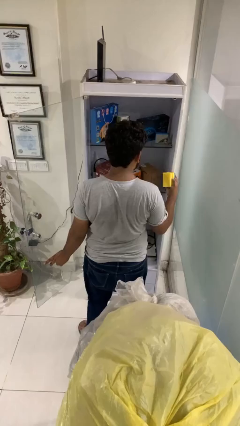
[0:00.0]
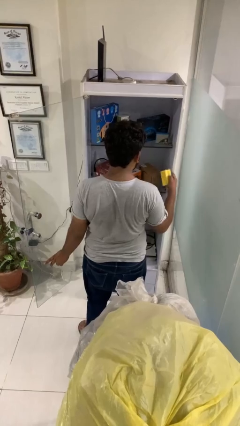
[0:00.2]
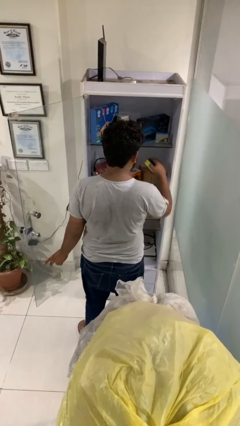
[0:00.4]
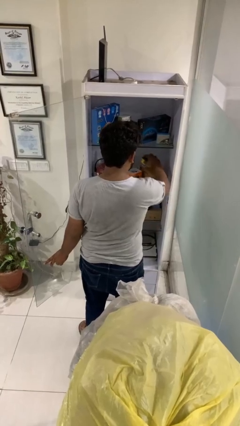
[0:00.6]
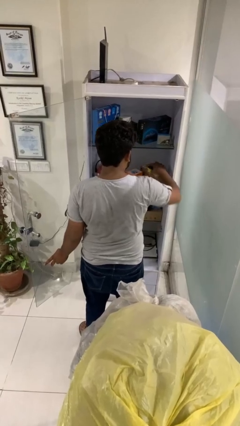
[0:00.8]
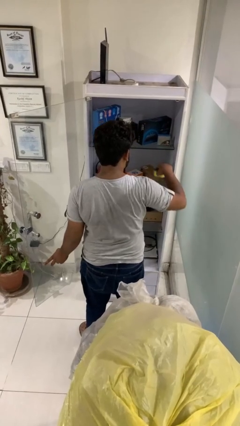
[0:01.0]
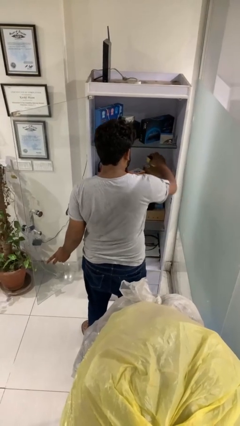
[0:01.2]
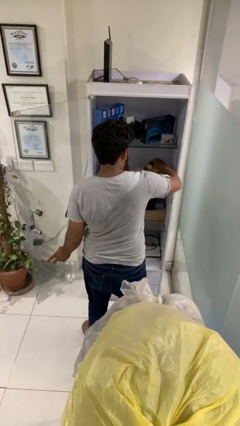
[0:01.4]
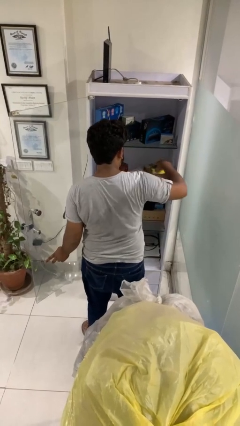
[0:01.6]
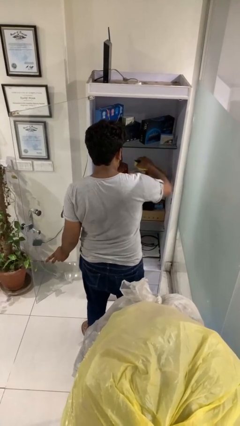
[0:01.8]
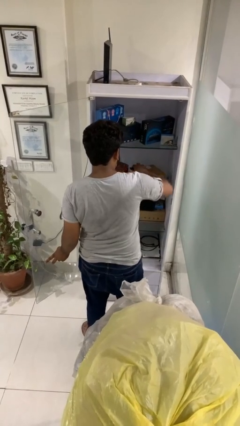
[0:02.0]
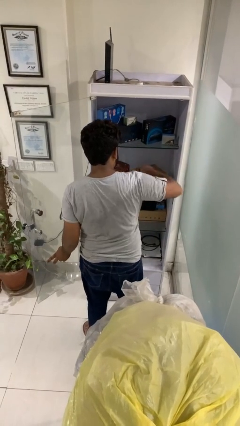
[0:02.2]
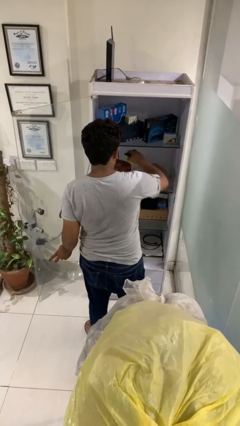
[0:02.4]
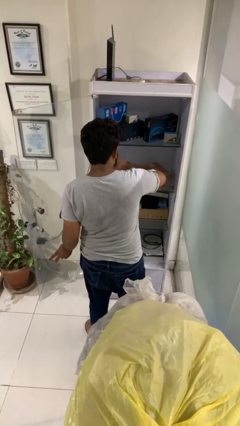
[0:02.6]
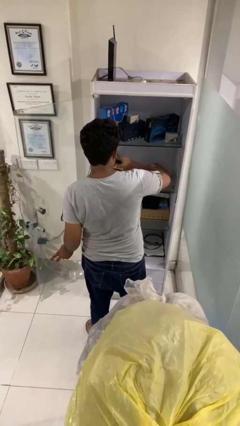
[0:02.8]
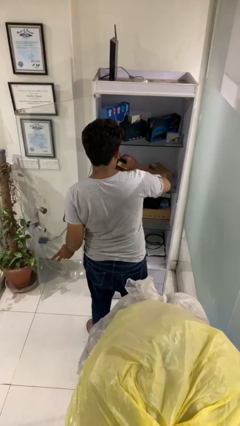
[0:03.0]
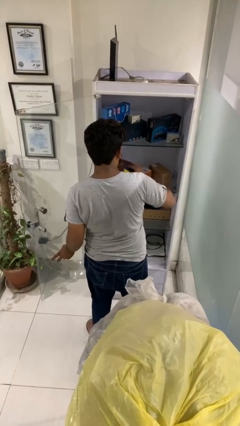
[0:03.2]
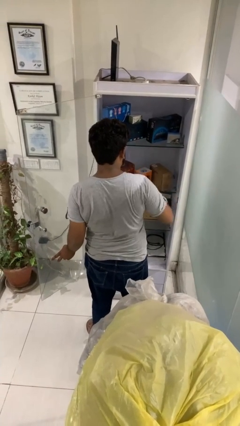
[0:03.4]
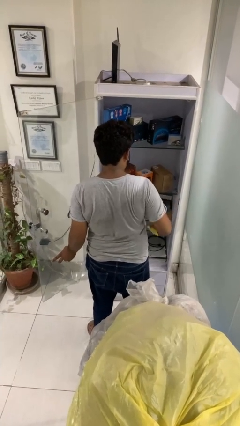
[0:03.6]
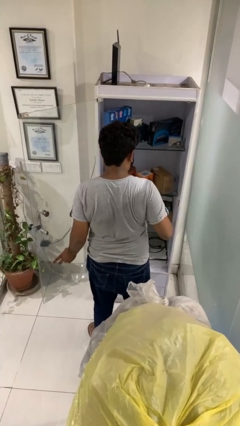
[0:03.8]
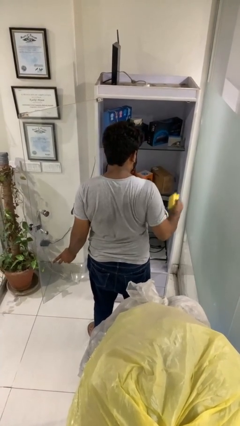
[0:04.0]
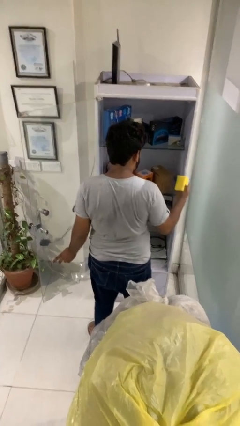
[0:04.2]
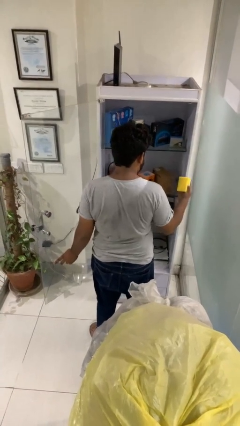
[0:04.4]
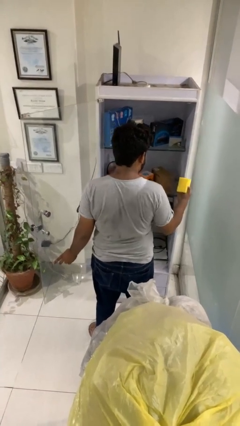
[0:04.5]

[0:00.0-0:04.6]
person dusts furniture

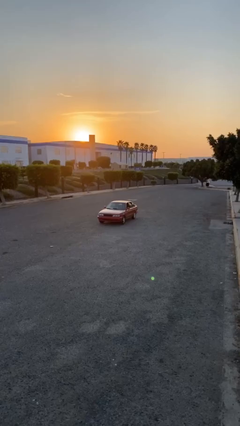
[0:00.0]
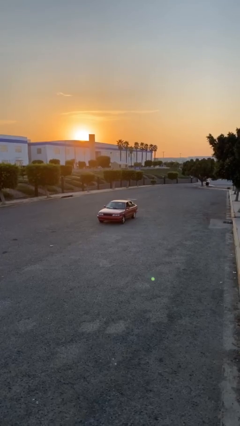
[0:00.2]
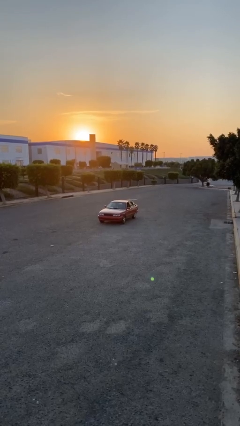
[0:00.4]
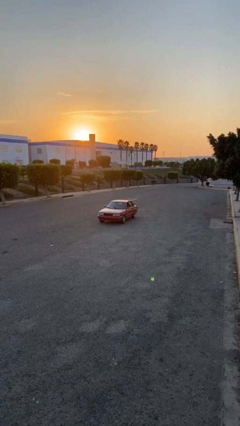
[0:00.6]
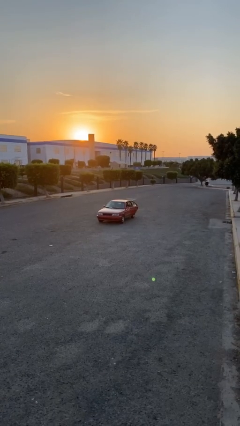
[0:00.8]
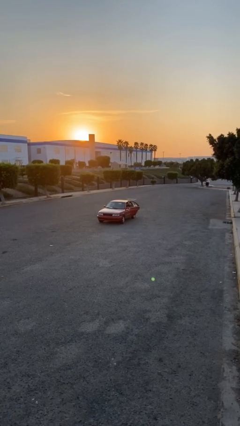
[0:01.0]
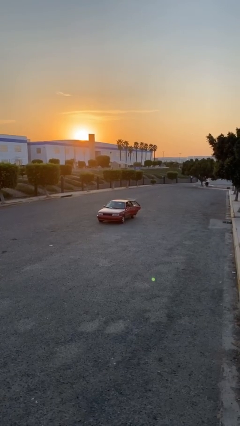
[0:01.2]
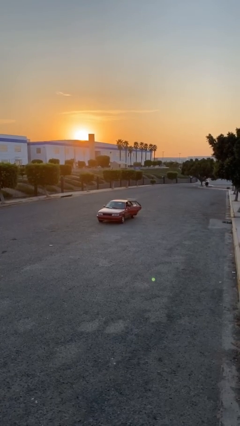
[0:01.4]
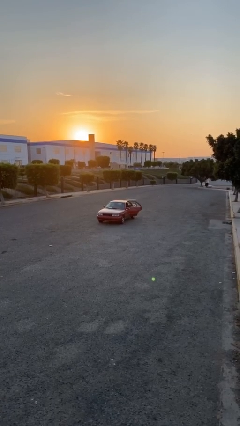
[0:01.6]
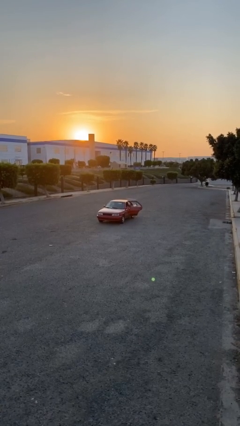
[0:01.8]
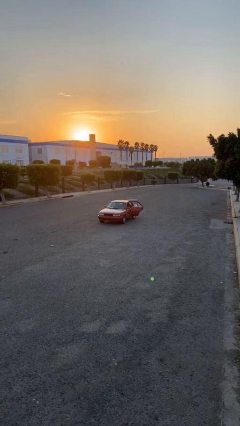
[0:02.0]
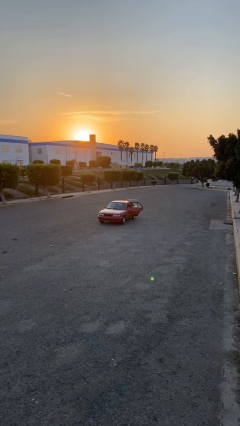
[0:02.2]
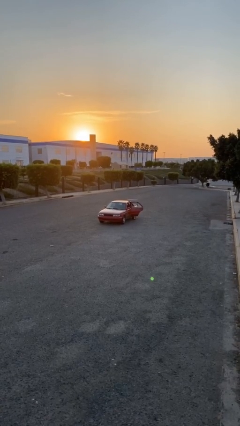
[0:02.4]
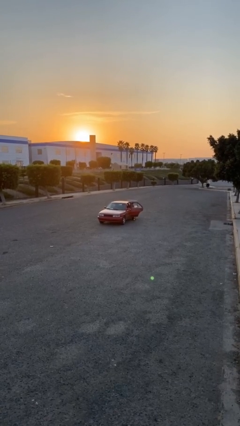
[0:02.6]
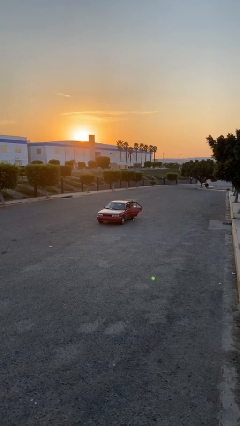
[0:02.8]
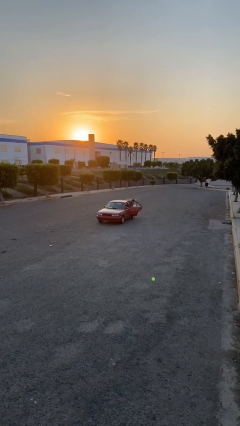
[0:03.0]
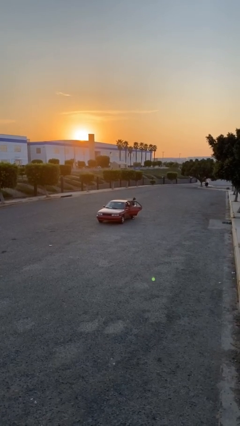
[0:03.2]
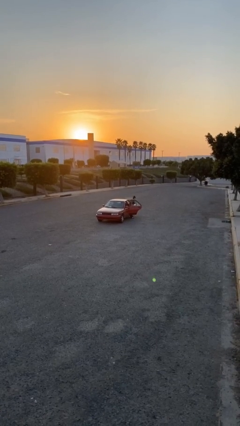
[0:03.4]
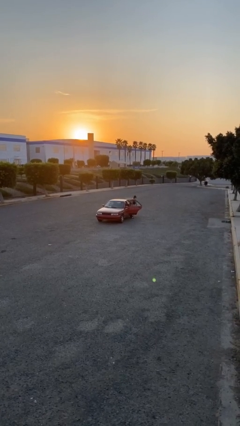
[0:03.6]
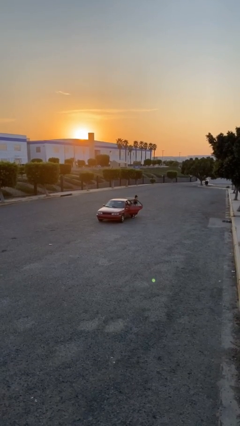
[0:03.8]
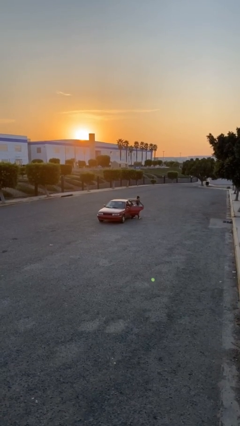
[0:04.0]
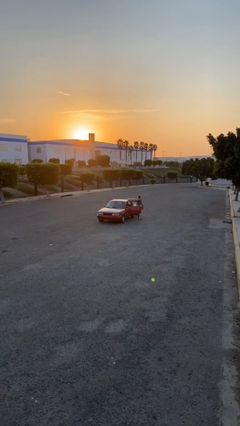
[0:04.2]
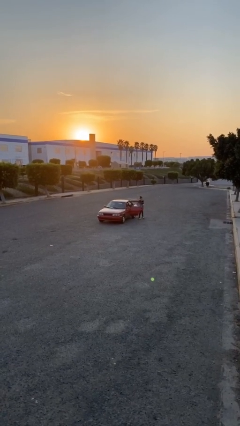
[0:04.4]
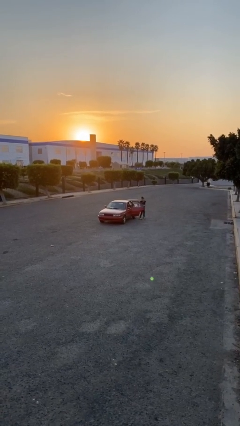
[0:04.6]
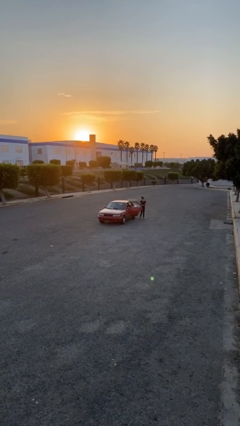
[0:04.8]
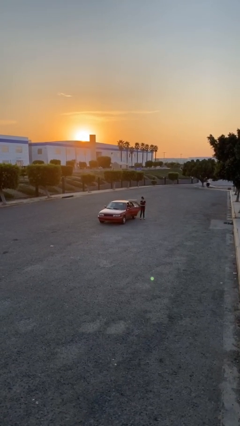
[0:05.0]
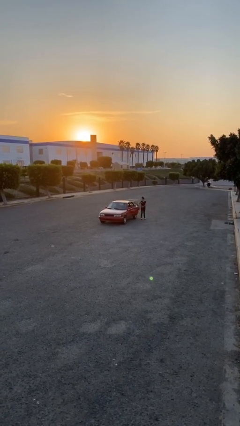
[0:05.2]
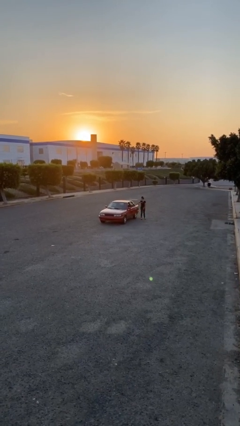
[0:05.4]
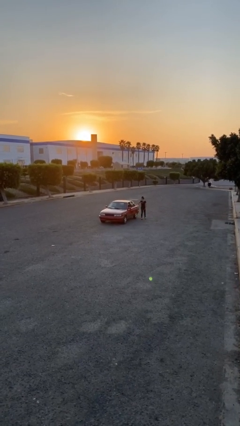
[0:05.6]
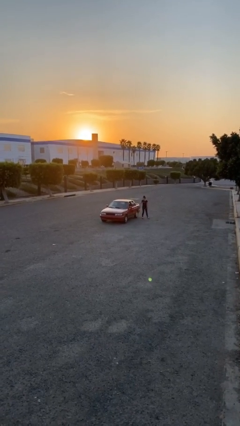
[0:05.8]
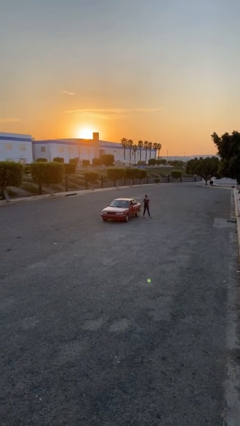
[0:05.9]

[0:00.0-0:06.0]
car drops off person

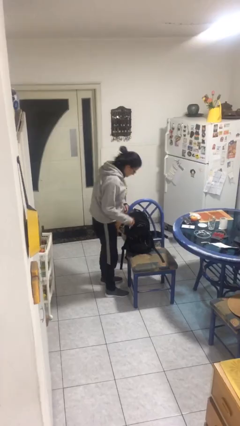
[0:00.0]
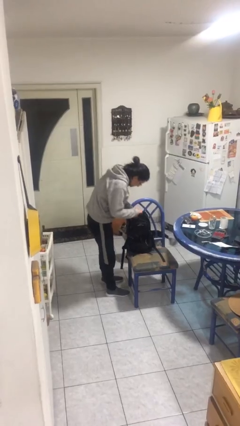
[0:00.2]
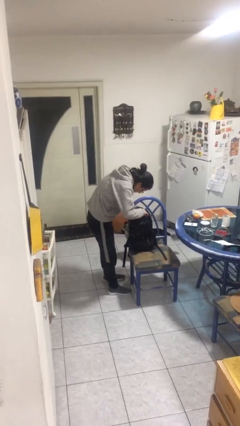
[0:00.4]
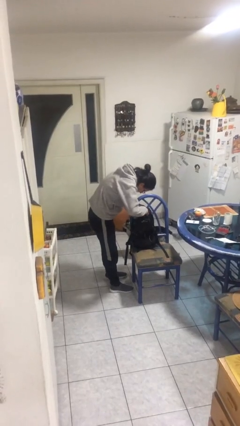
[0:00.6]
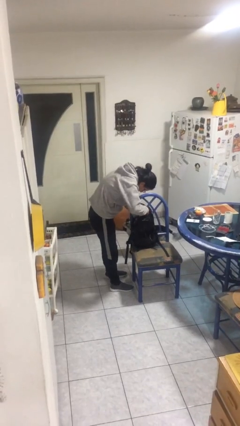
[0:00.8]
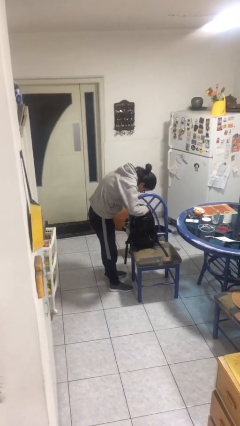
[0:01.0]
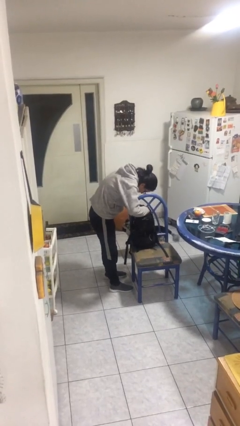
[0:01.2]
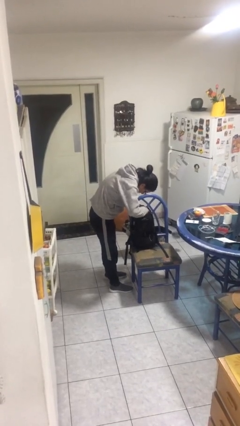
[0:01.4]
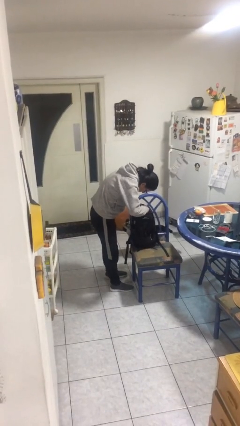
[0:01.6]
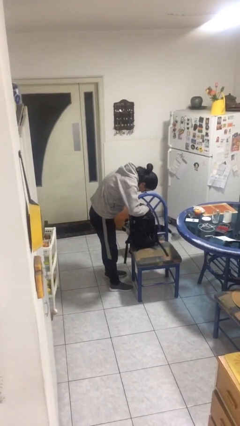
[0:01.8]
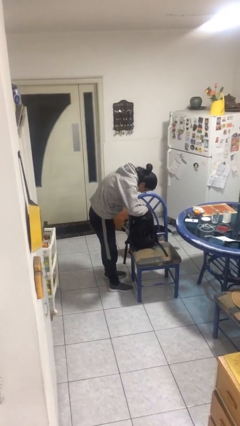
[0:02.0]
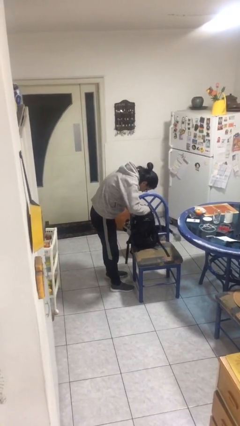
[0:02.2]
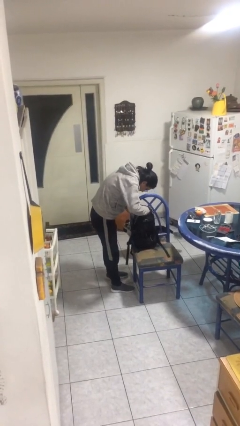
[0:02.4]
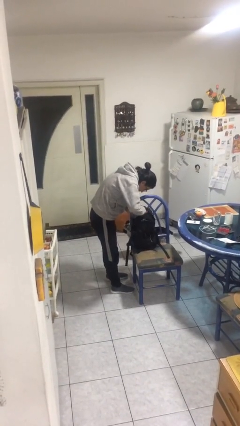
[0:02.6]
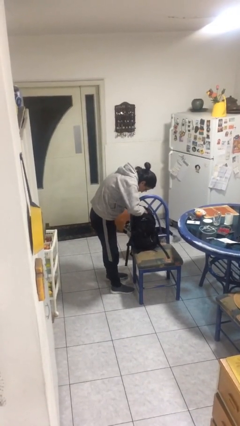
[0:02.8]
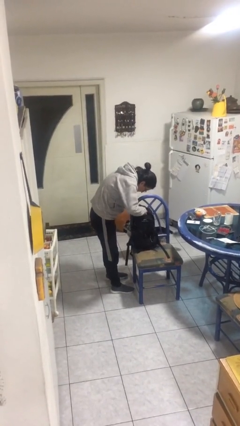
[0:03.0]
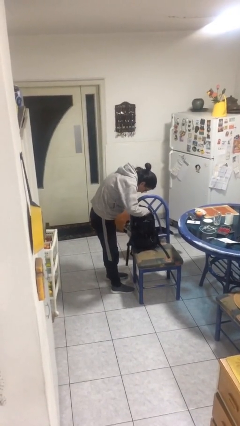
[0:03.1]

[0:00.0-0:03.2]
person searches in backpack

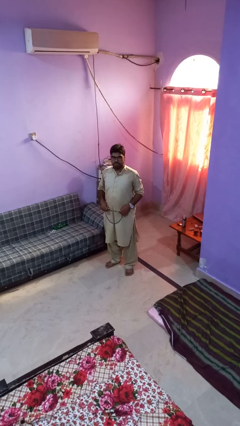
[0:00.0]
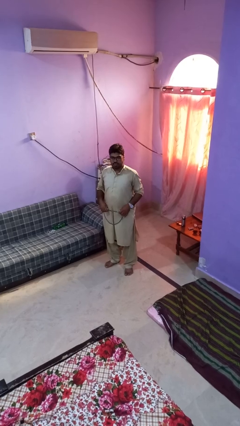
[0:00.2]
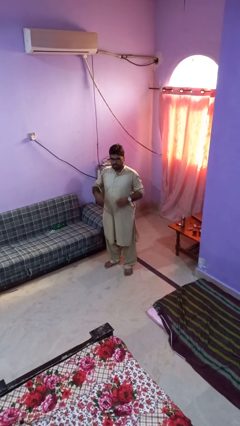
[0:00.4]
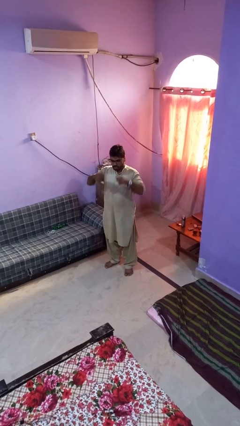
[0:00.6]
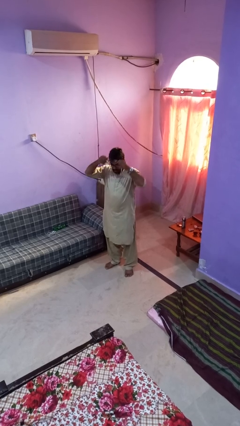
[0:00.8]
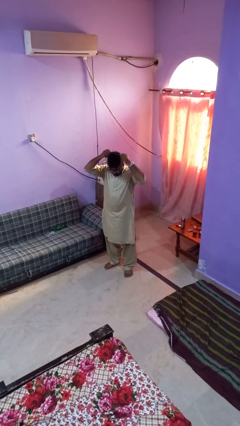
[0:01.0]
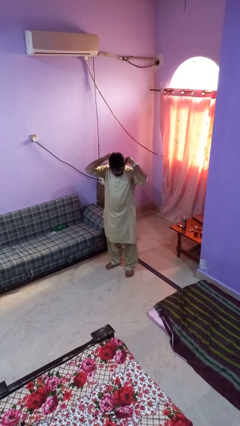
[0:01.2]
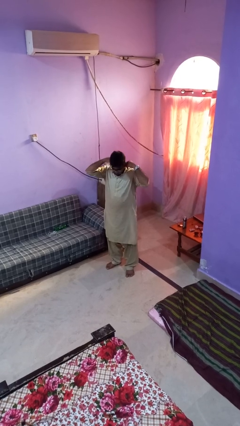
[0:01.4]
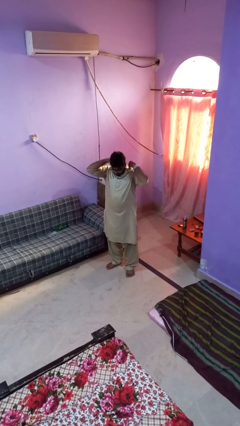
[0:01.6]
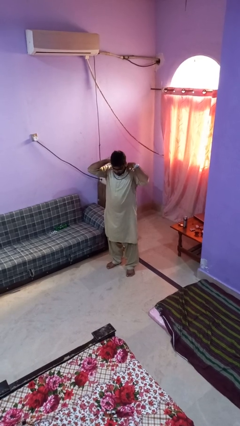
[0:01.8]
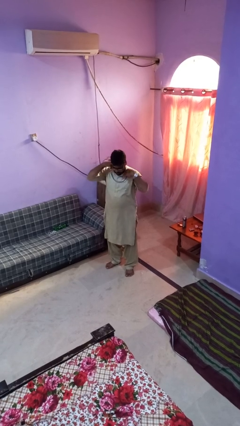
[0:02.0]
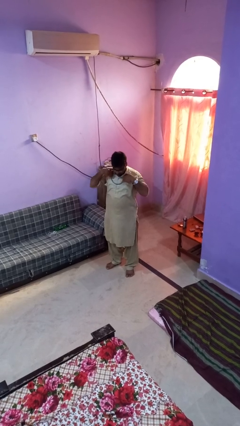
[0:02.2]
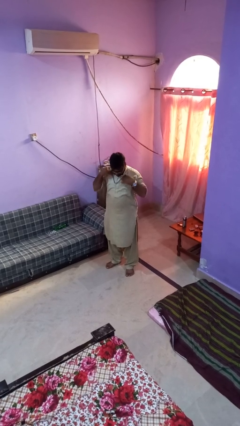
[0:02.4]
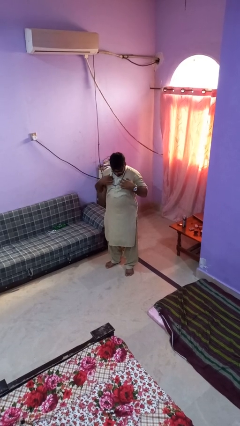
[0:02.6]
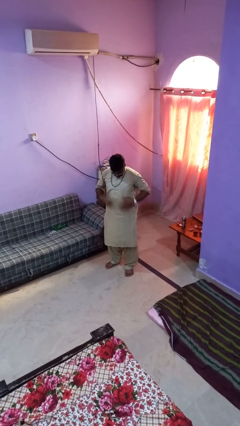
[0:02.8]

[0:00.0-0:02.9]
person puts on necklace

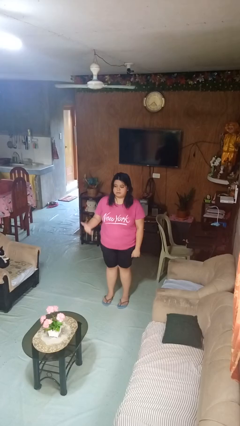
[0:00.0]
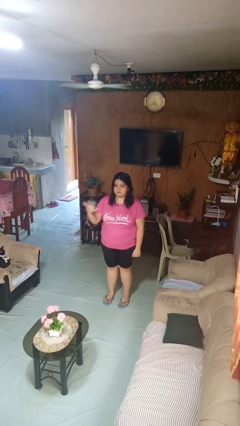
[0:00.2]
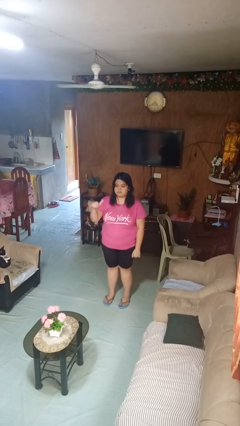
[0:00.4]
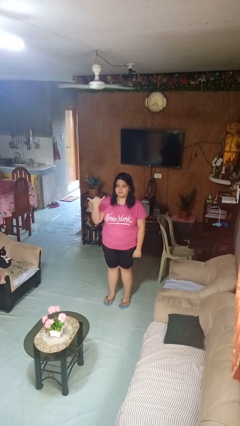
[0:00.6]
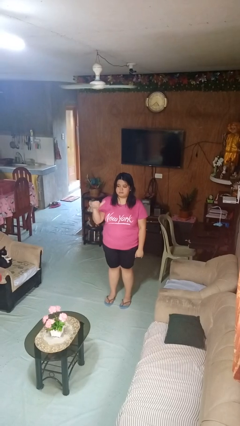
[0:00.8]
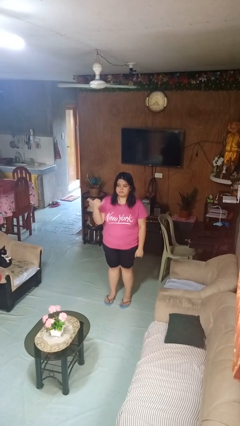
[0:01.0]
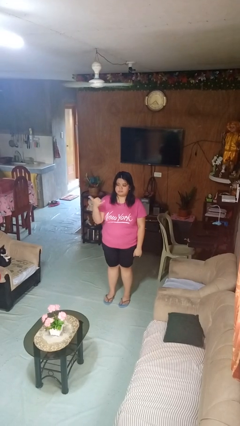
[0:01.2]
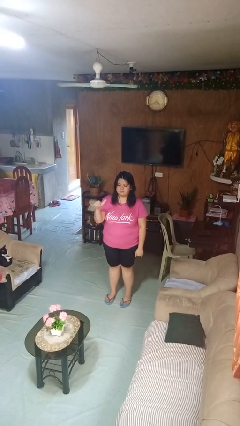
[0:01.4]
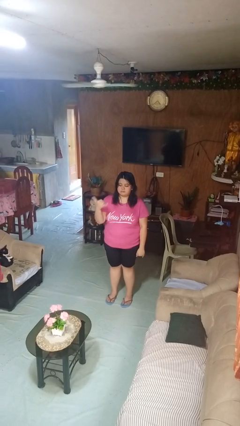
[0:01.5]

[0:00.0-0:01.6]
person gestures hang loose
